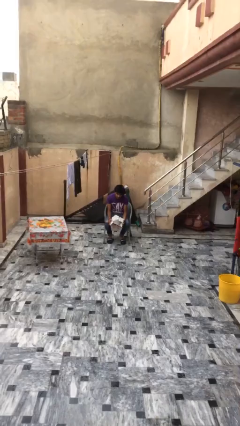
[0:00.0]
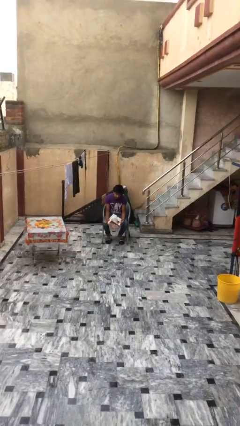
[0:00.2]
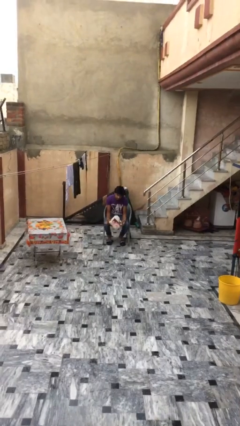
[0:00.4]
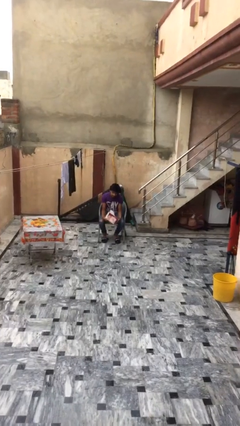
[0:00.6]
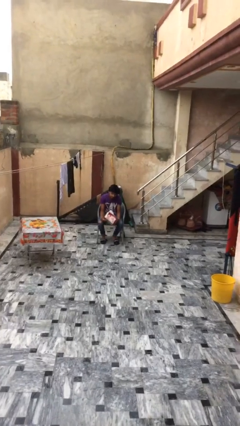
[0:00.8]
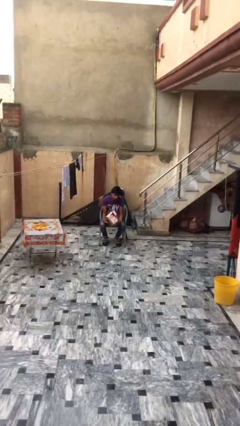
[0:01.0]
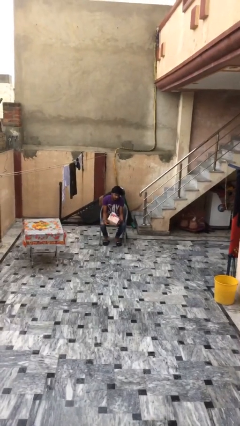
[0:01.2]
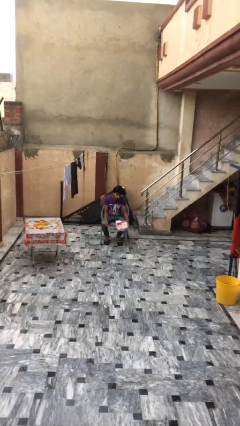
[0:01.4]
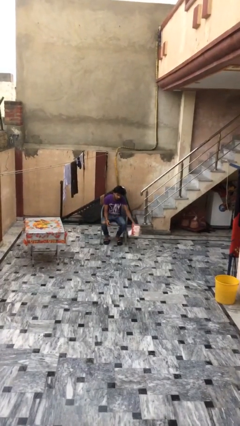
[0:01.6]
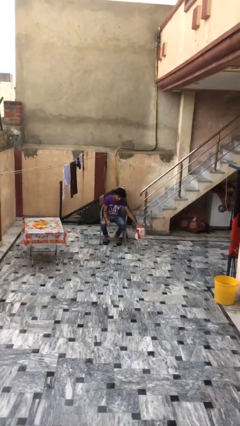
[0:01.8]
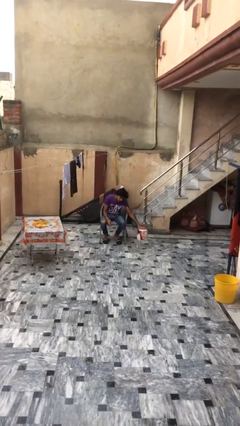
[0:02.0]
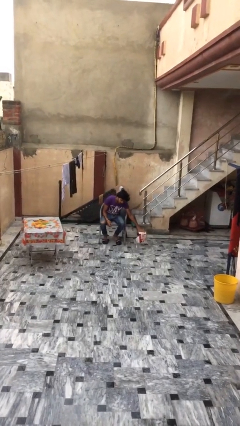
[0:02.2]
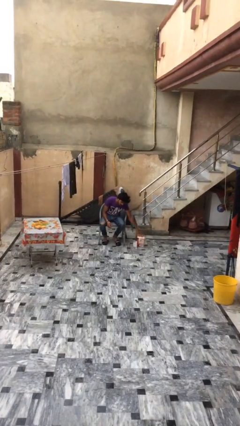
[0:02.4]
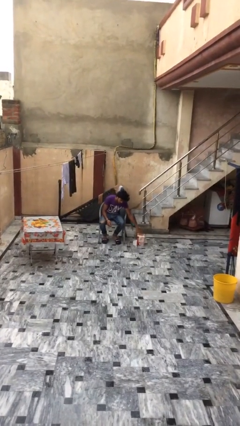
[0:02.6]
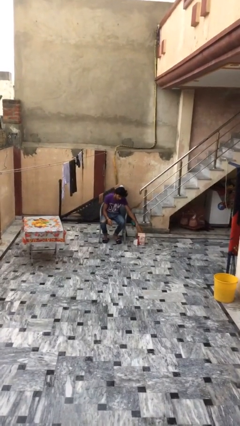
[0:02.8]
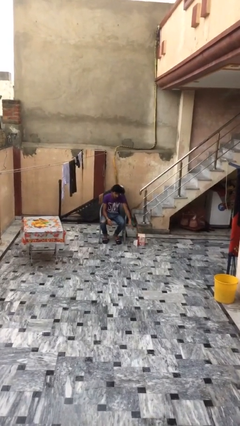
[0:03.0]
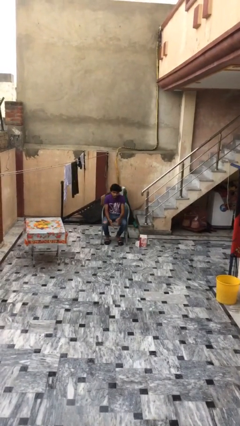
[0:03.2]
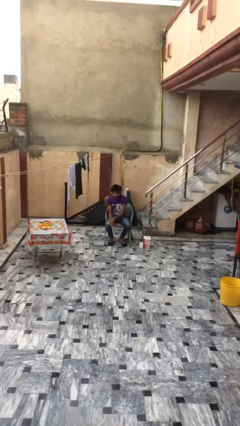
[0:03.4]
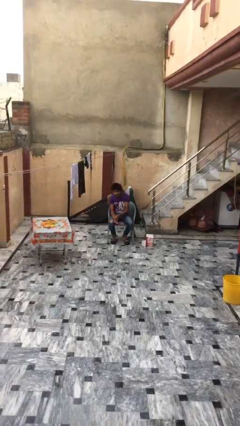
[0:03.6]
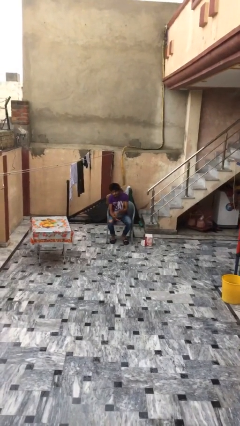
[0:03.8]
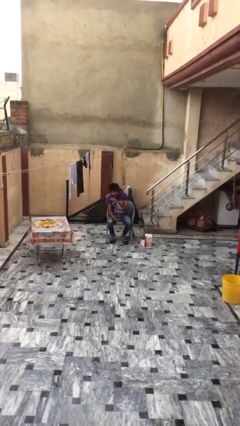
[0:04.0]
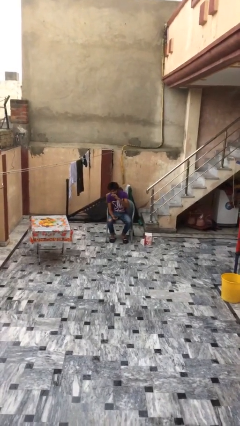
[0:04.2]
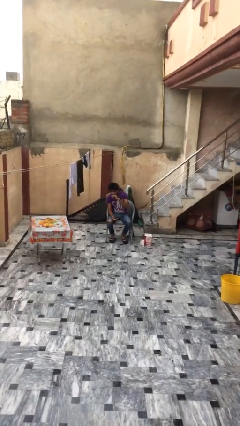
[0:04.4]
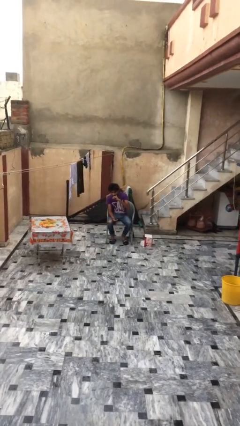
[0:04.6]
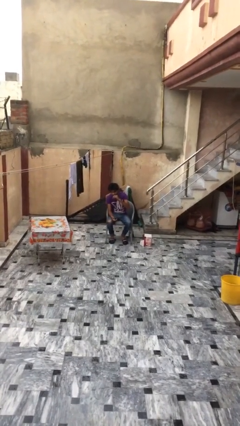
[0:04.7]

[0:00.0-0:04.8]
person puts down object on floor

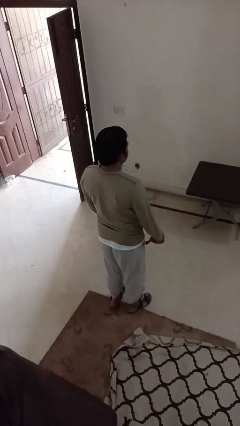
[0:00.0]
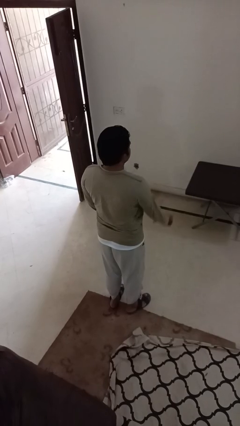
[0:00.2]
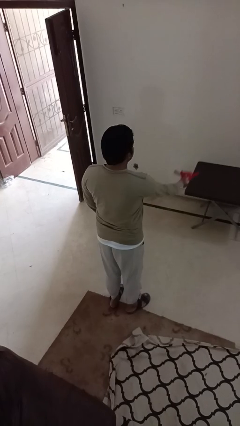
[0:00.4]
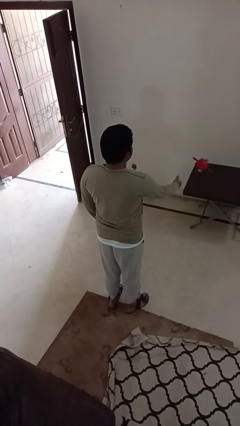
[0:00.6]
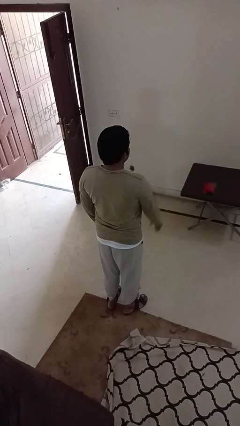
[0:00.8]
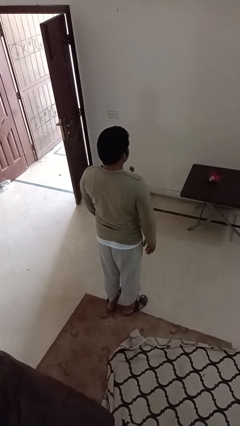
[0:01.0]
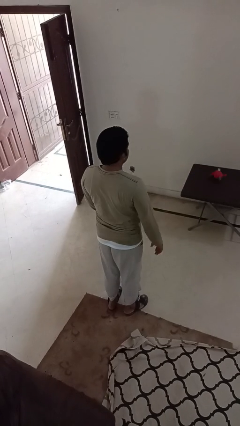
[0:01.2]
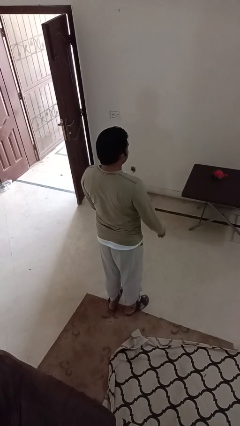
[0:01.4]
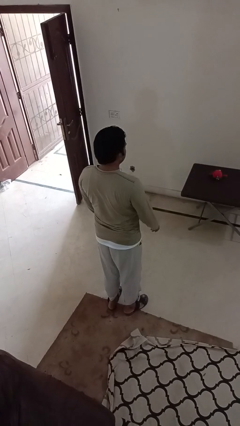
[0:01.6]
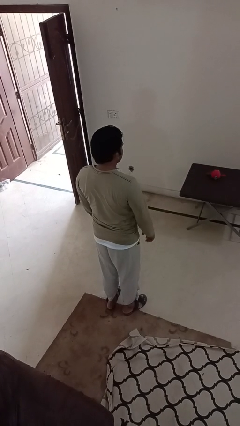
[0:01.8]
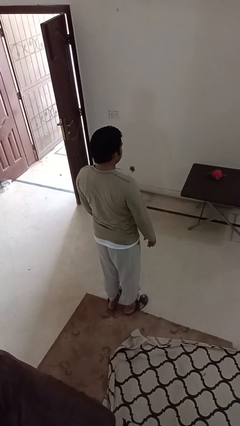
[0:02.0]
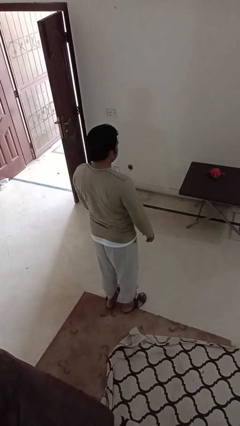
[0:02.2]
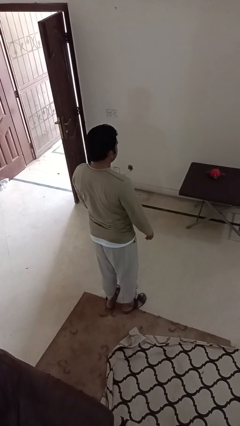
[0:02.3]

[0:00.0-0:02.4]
person throws object on table

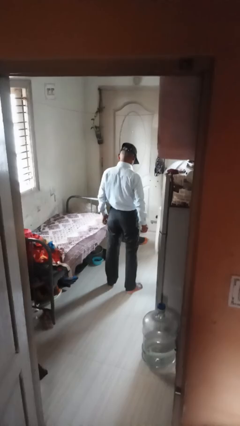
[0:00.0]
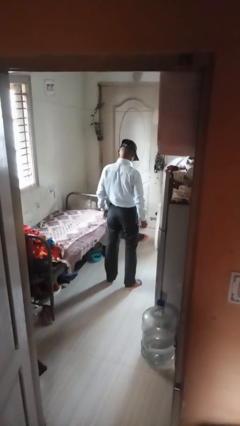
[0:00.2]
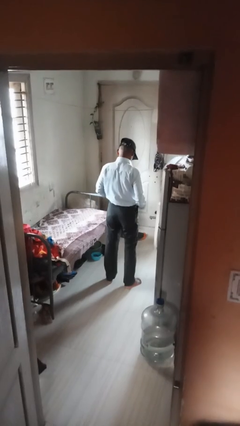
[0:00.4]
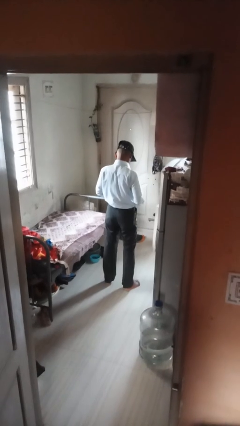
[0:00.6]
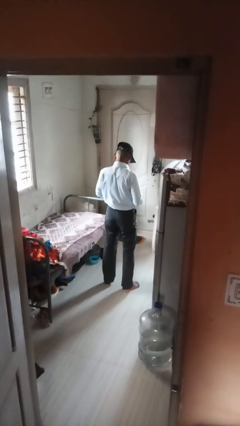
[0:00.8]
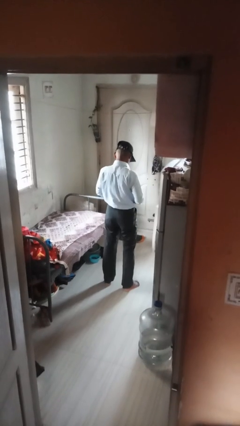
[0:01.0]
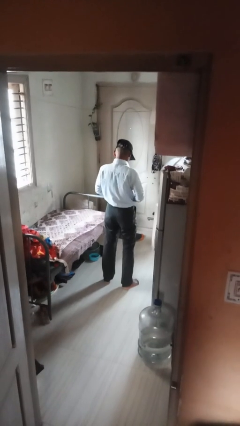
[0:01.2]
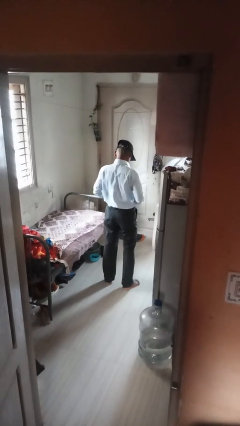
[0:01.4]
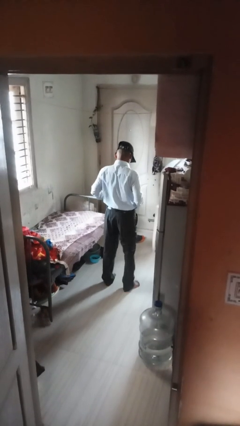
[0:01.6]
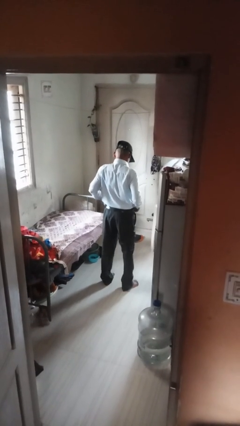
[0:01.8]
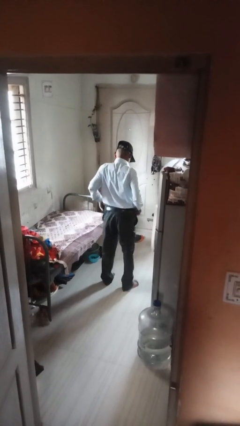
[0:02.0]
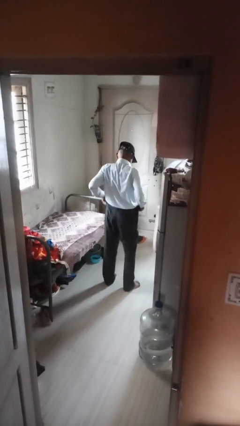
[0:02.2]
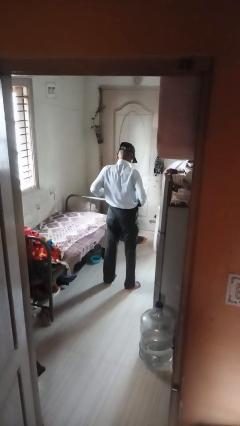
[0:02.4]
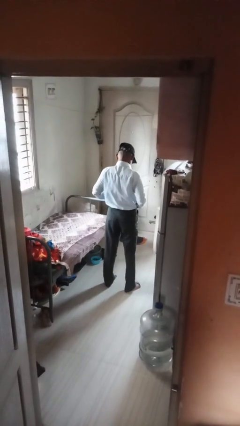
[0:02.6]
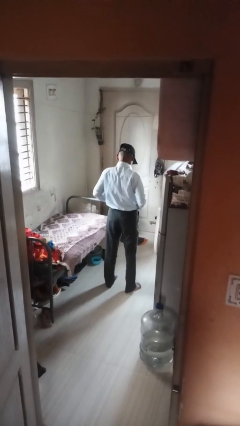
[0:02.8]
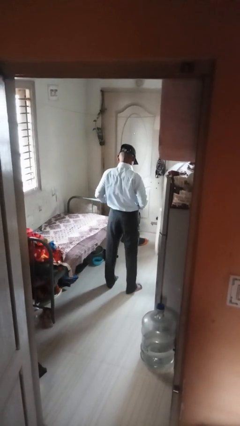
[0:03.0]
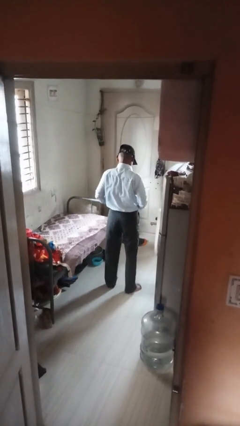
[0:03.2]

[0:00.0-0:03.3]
person hikes up pants

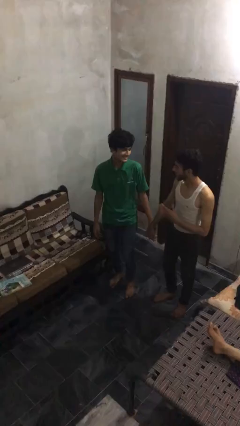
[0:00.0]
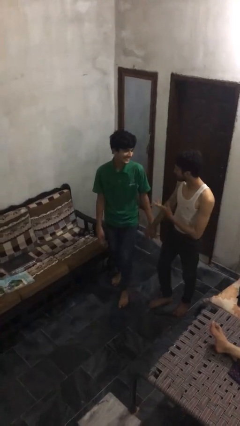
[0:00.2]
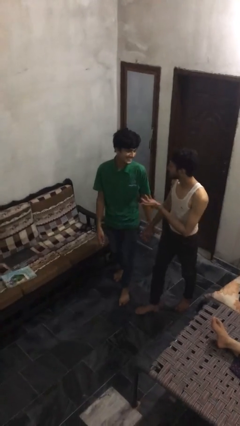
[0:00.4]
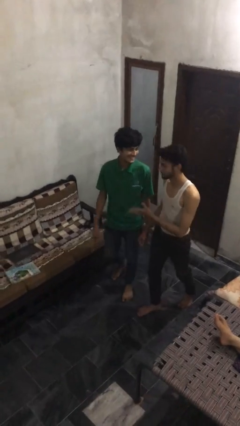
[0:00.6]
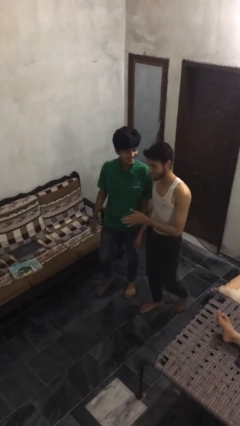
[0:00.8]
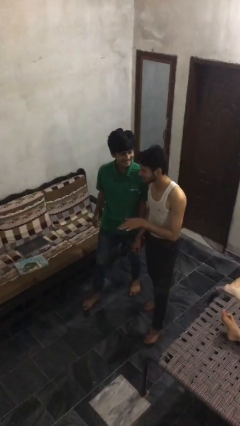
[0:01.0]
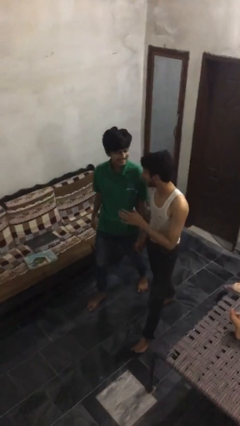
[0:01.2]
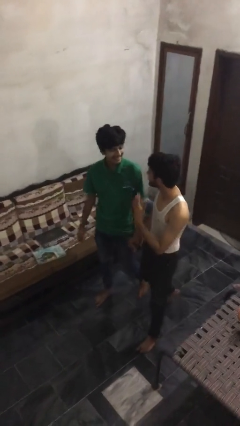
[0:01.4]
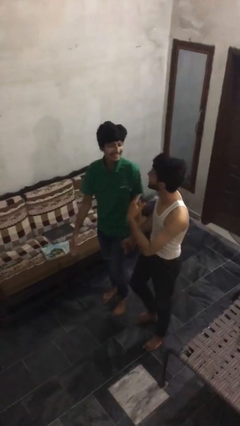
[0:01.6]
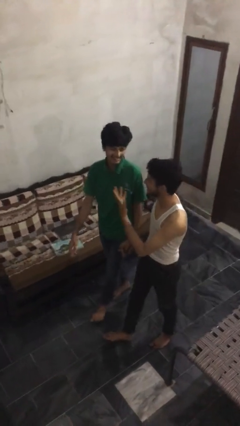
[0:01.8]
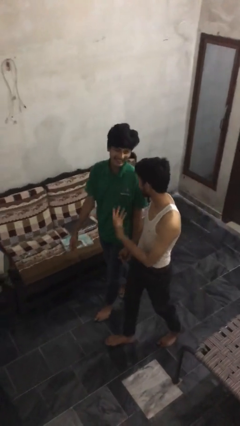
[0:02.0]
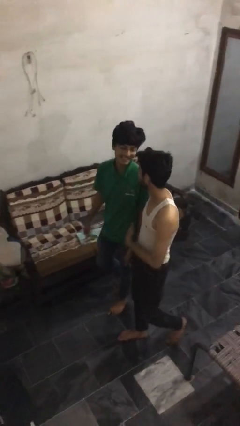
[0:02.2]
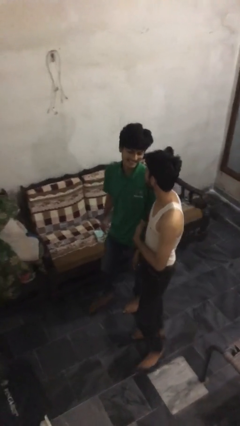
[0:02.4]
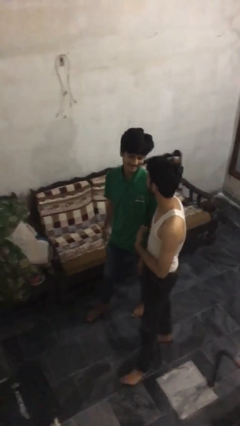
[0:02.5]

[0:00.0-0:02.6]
person holds hand

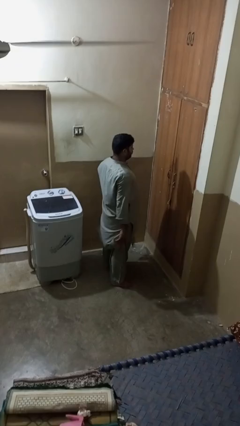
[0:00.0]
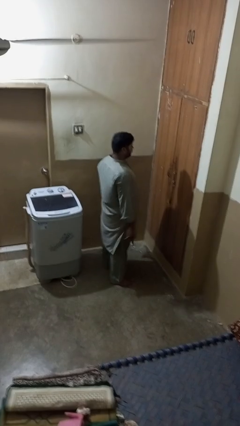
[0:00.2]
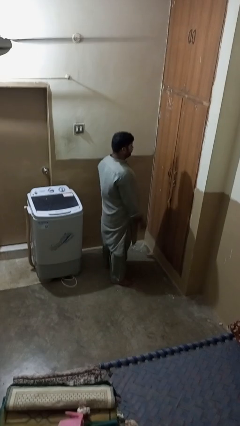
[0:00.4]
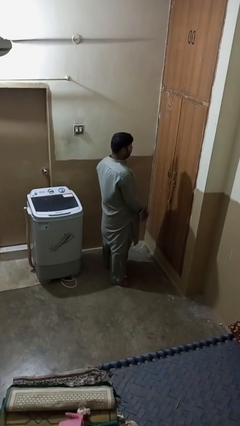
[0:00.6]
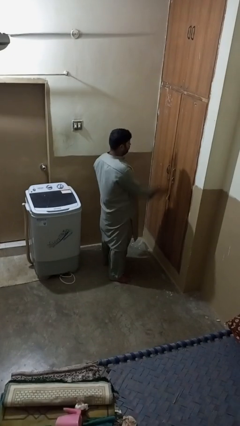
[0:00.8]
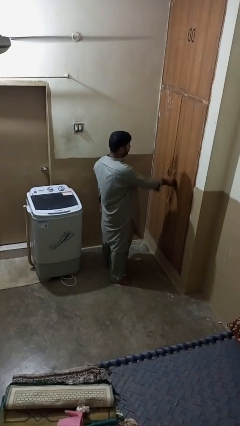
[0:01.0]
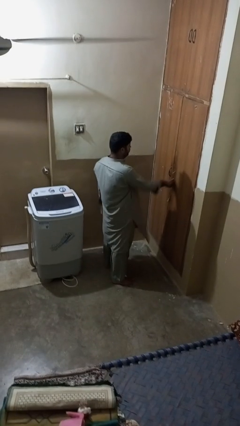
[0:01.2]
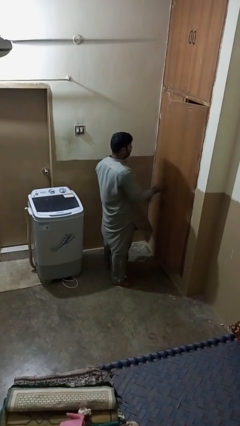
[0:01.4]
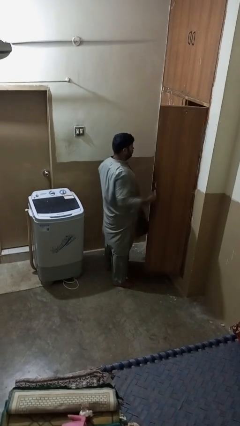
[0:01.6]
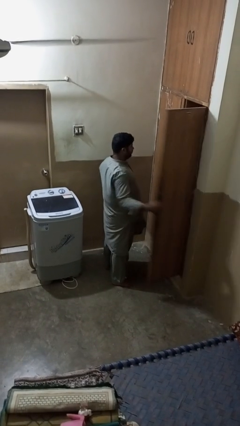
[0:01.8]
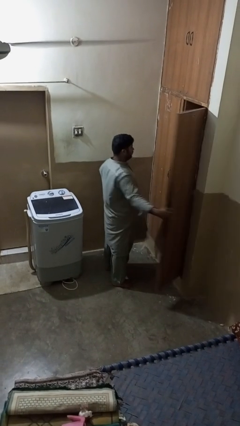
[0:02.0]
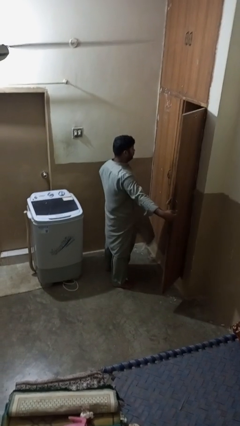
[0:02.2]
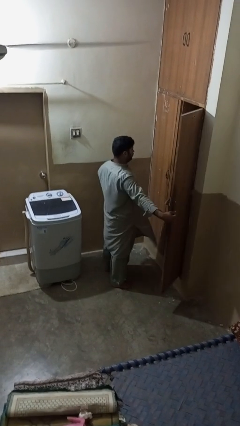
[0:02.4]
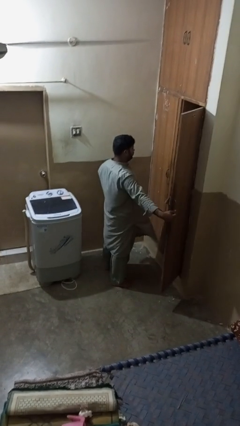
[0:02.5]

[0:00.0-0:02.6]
person opens closet door

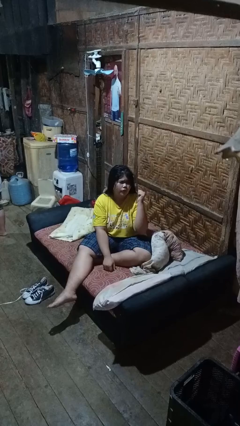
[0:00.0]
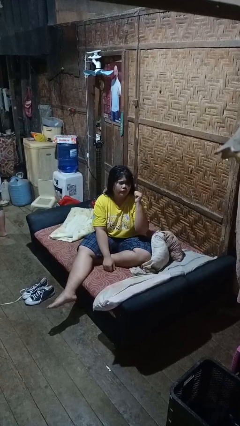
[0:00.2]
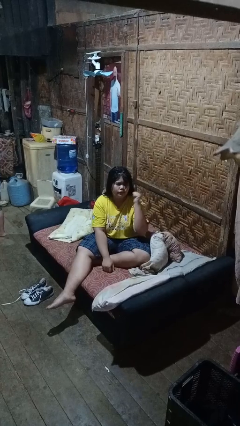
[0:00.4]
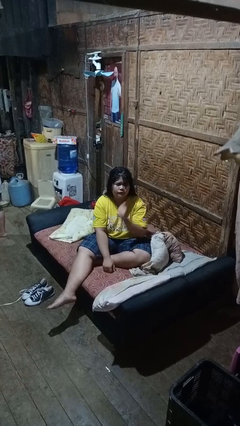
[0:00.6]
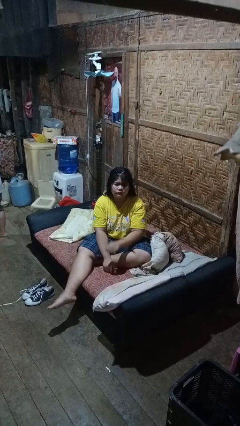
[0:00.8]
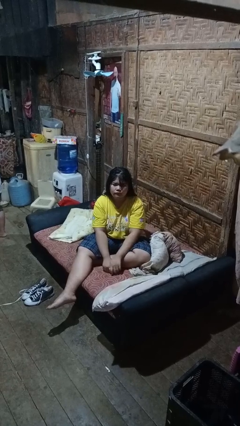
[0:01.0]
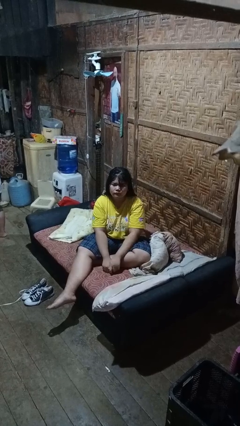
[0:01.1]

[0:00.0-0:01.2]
person gestures behind me
